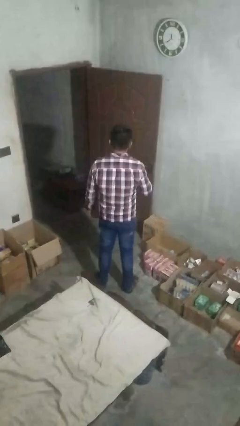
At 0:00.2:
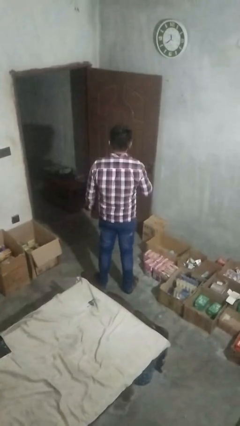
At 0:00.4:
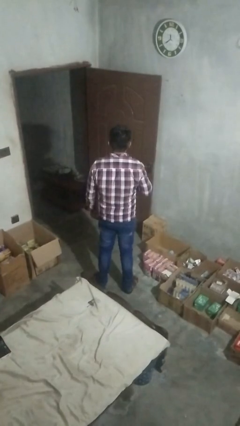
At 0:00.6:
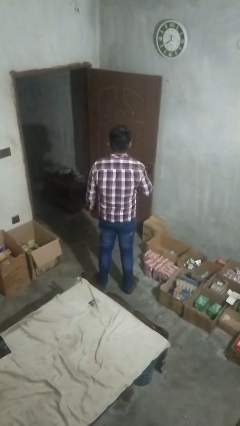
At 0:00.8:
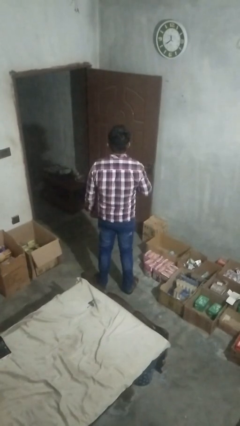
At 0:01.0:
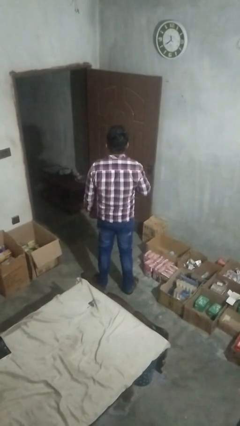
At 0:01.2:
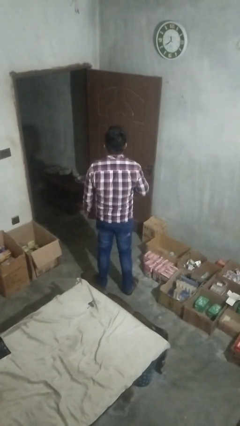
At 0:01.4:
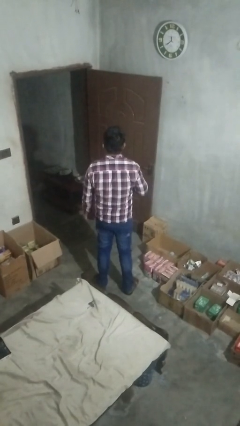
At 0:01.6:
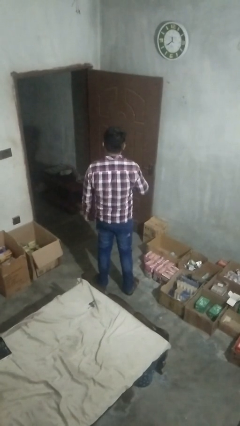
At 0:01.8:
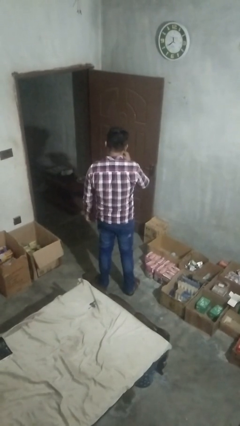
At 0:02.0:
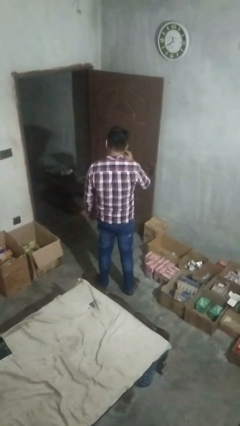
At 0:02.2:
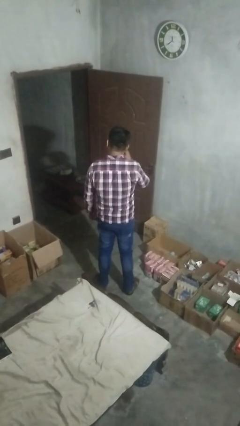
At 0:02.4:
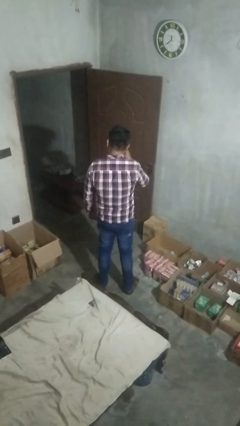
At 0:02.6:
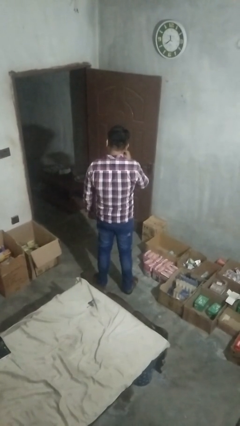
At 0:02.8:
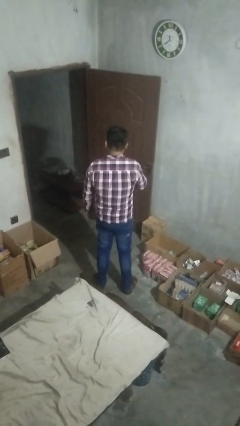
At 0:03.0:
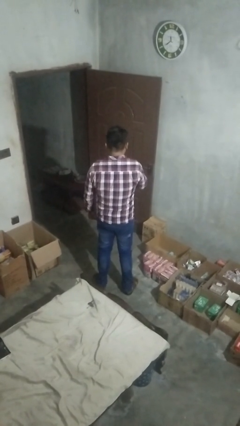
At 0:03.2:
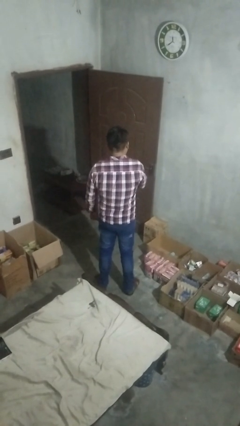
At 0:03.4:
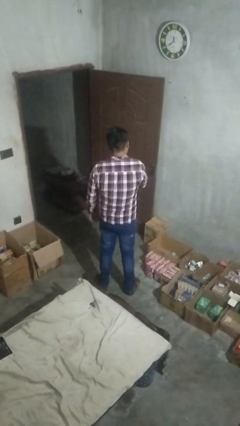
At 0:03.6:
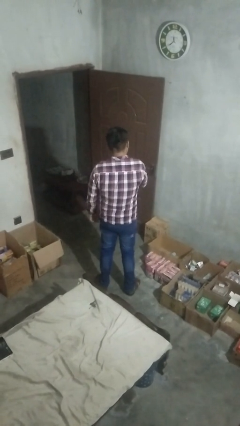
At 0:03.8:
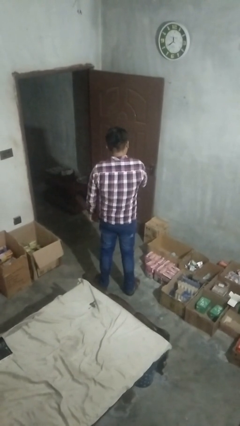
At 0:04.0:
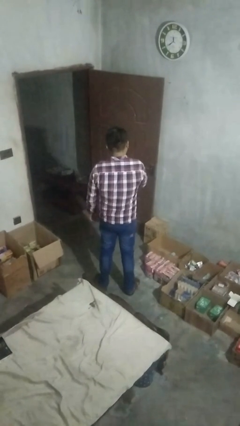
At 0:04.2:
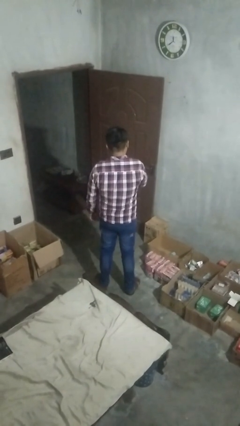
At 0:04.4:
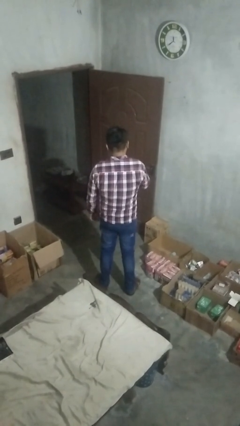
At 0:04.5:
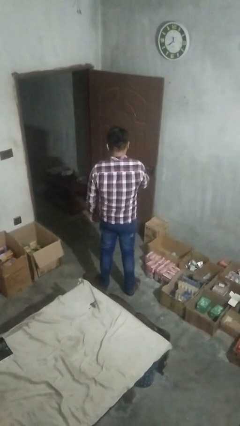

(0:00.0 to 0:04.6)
person brushes teeth

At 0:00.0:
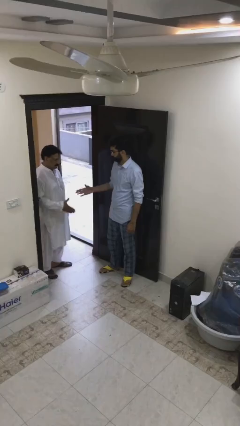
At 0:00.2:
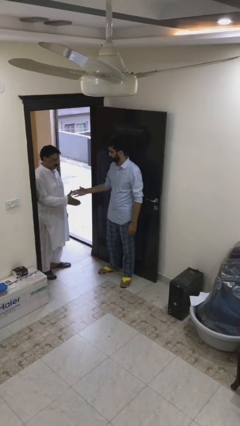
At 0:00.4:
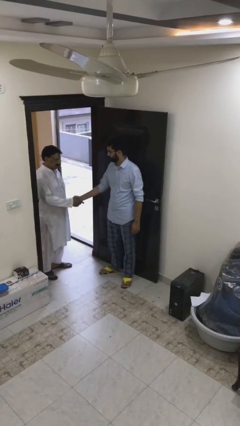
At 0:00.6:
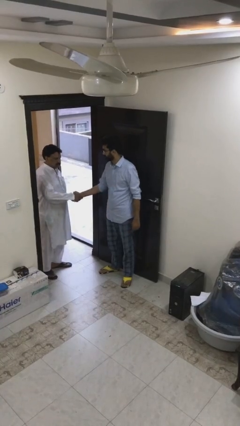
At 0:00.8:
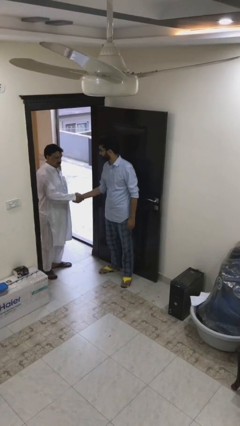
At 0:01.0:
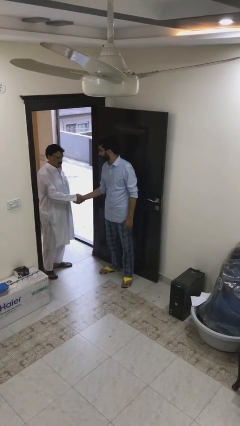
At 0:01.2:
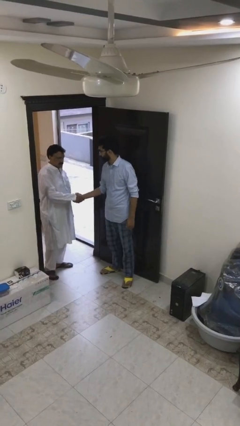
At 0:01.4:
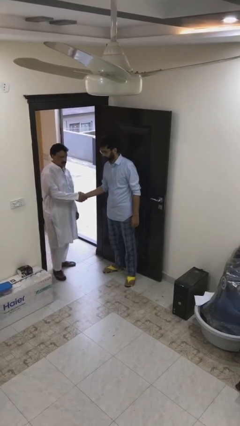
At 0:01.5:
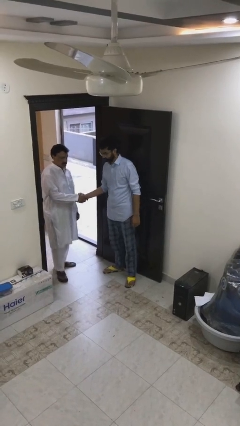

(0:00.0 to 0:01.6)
person shakes hand

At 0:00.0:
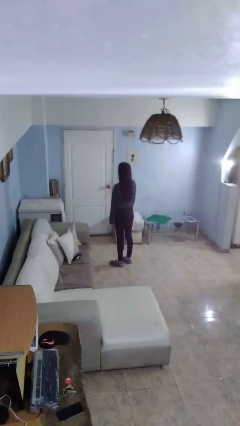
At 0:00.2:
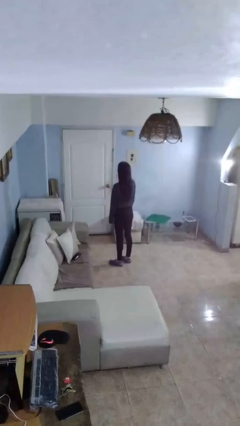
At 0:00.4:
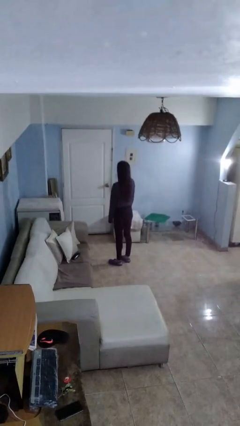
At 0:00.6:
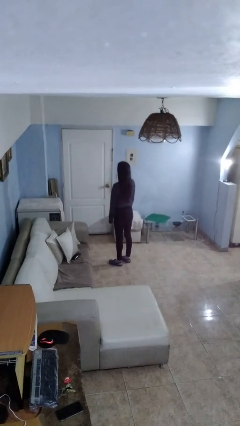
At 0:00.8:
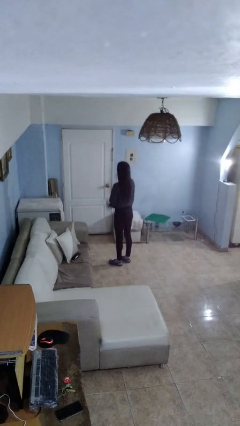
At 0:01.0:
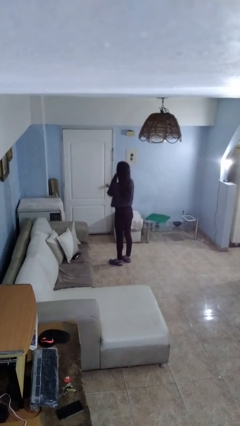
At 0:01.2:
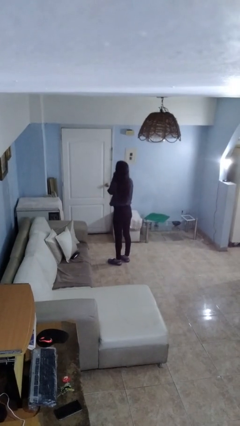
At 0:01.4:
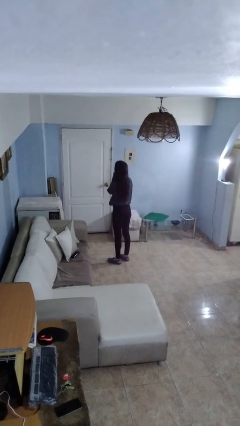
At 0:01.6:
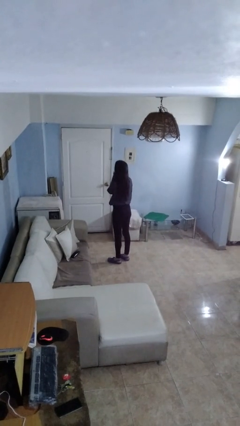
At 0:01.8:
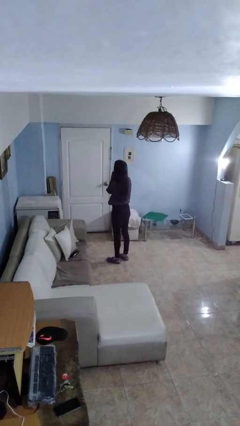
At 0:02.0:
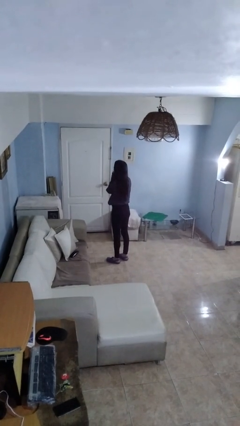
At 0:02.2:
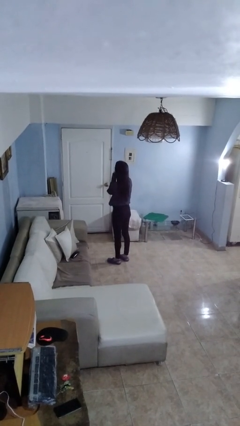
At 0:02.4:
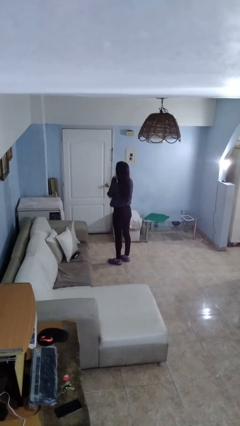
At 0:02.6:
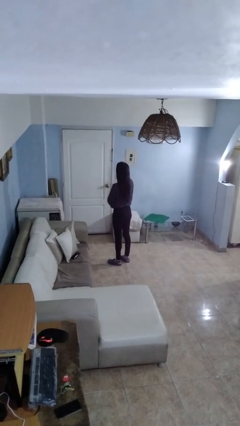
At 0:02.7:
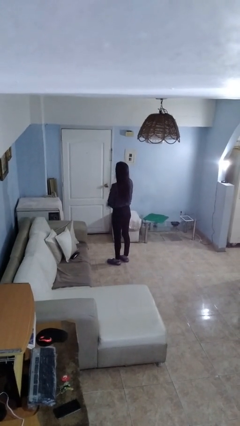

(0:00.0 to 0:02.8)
person strokes chin

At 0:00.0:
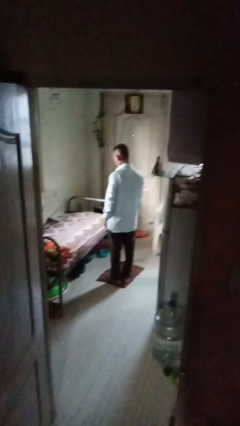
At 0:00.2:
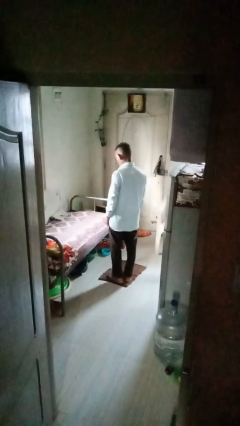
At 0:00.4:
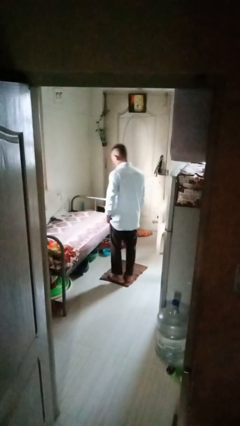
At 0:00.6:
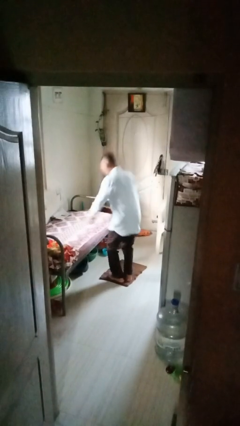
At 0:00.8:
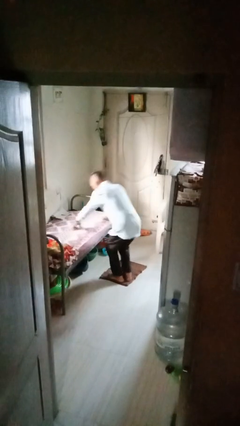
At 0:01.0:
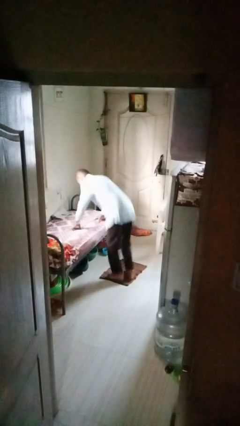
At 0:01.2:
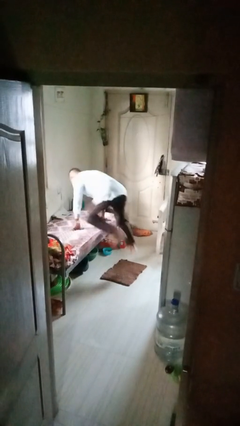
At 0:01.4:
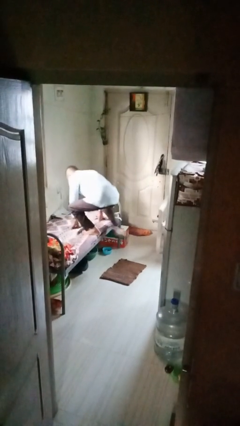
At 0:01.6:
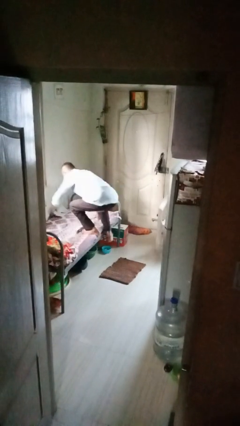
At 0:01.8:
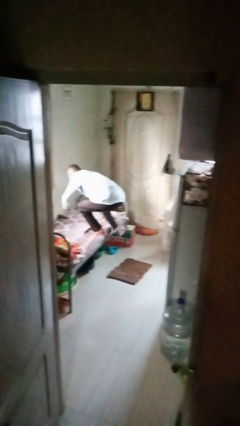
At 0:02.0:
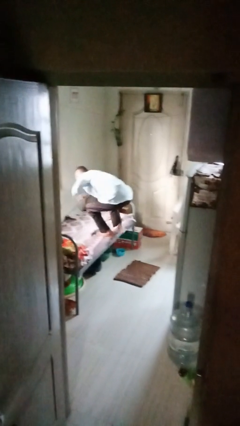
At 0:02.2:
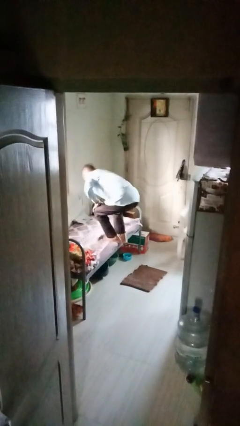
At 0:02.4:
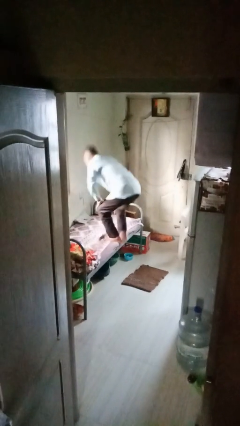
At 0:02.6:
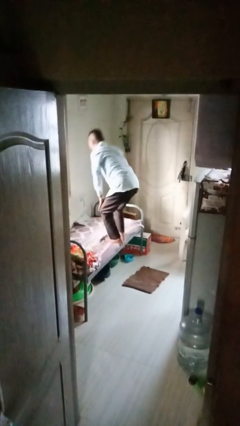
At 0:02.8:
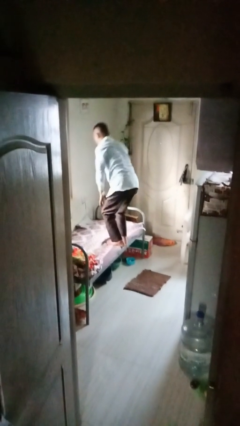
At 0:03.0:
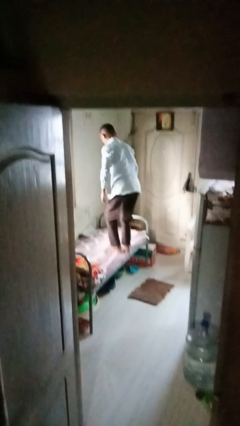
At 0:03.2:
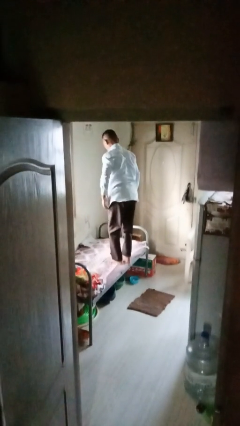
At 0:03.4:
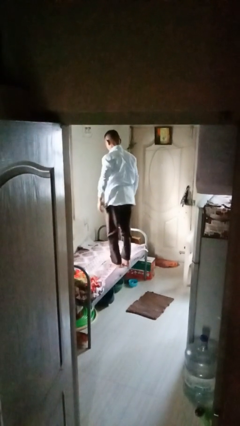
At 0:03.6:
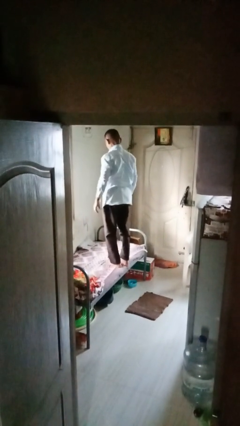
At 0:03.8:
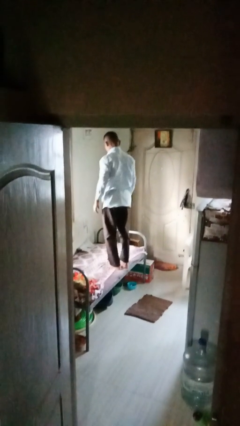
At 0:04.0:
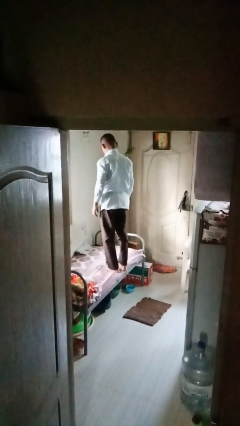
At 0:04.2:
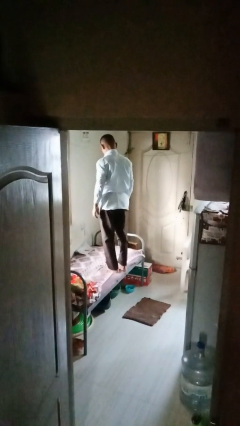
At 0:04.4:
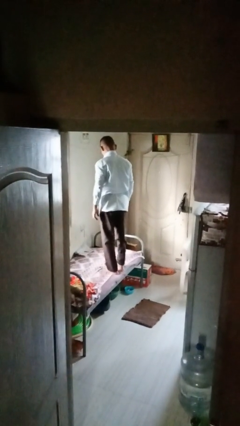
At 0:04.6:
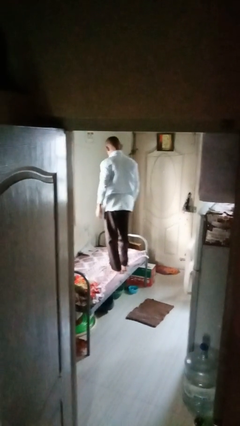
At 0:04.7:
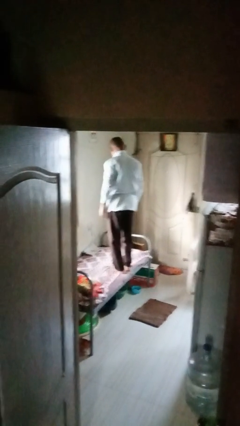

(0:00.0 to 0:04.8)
person jumps on bed

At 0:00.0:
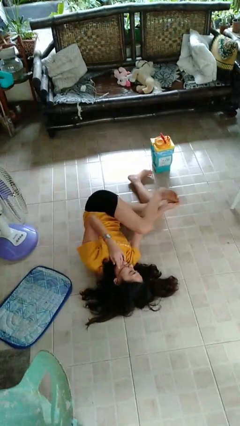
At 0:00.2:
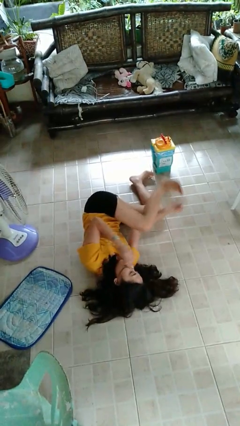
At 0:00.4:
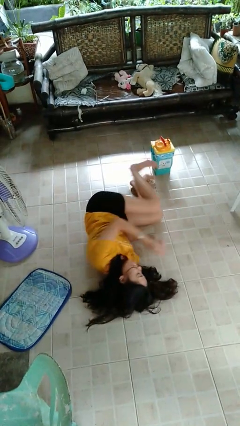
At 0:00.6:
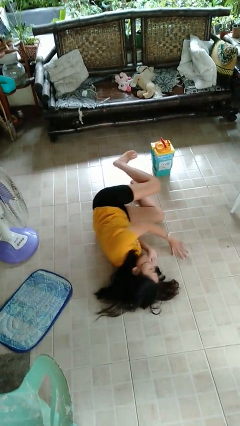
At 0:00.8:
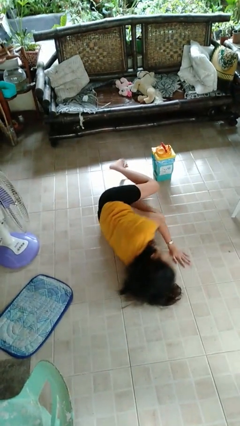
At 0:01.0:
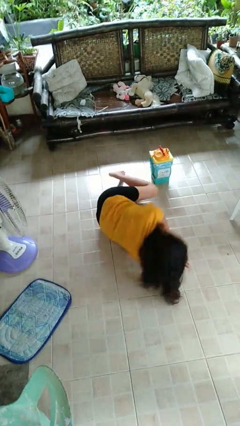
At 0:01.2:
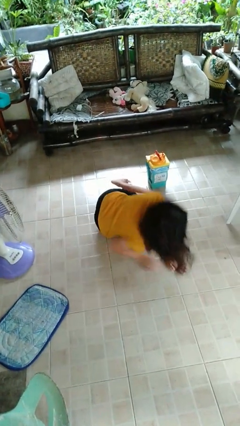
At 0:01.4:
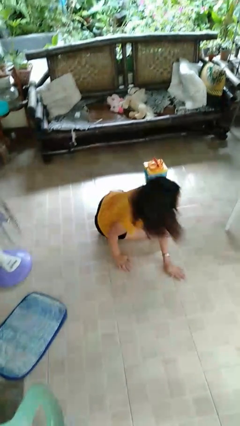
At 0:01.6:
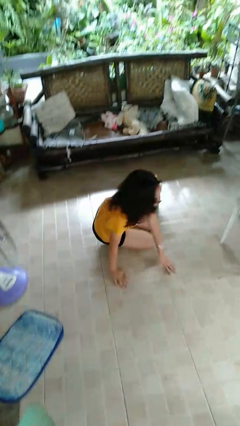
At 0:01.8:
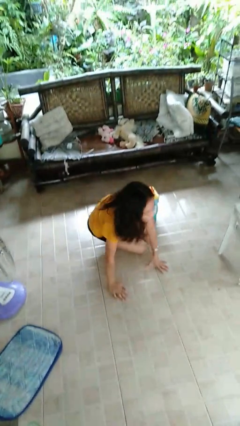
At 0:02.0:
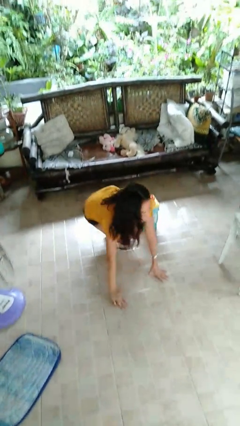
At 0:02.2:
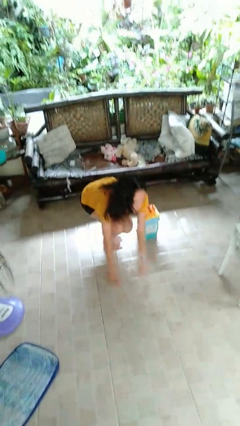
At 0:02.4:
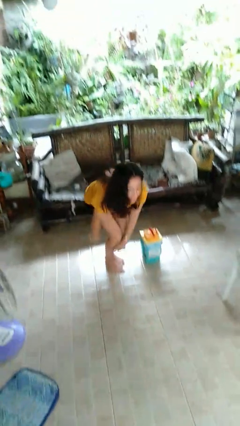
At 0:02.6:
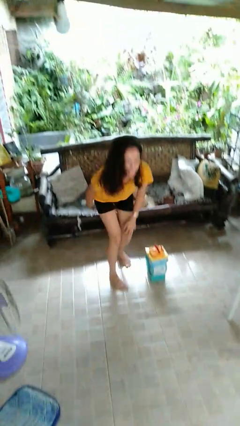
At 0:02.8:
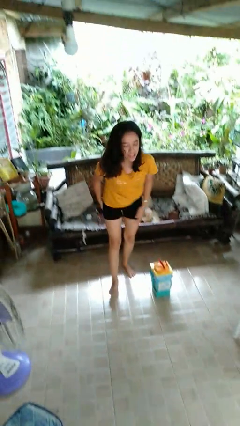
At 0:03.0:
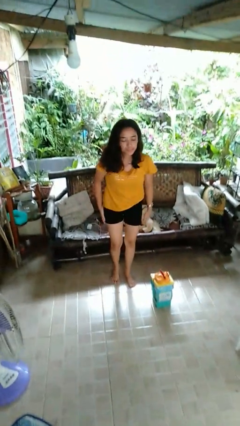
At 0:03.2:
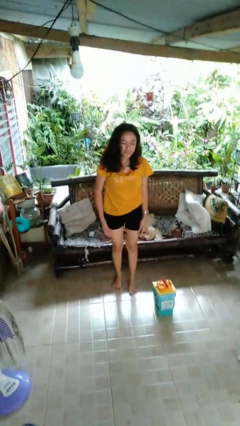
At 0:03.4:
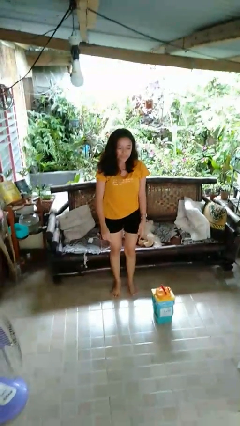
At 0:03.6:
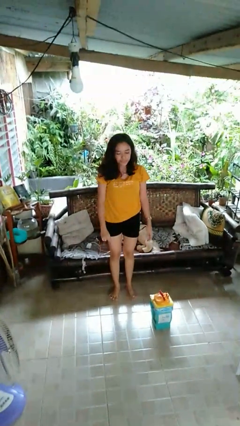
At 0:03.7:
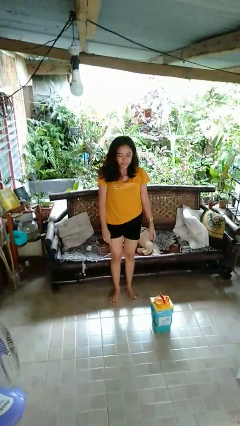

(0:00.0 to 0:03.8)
person stands up from floor
